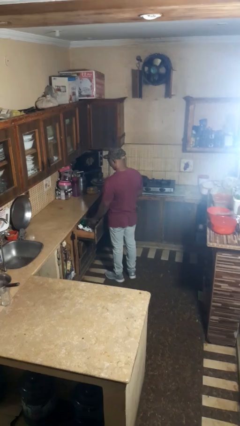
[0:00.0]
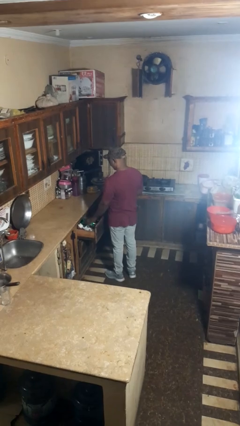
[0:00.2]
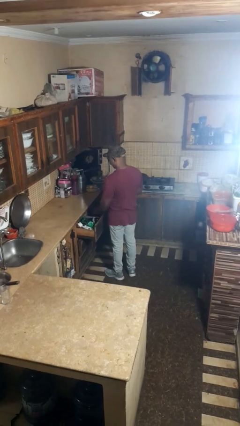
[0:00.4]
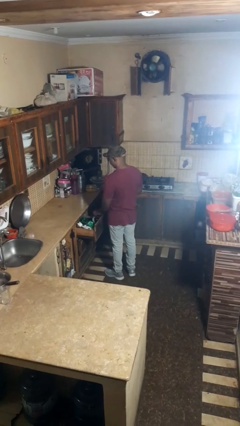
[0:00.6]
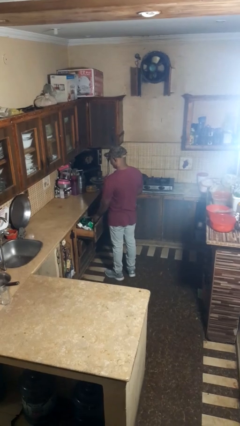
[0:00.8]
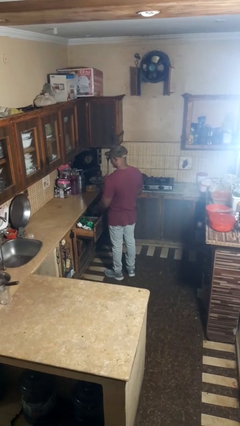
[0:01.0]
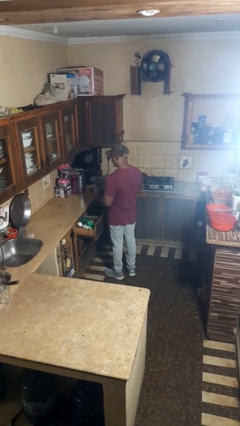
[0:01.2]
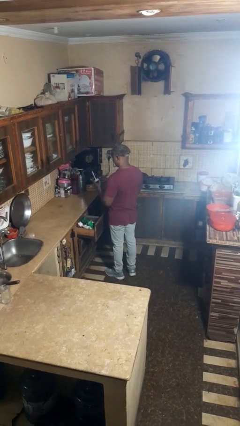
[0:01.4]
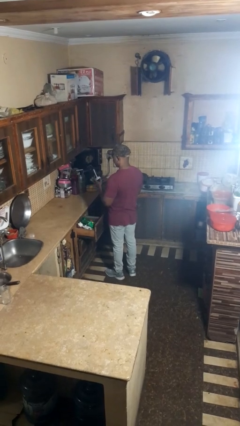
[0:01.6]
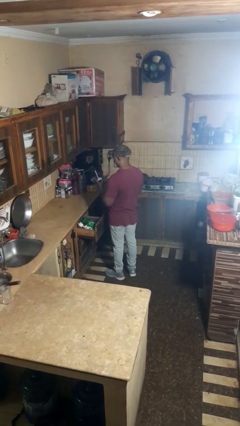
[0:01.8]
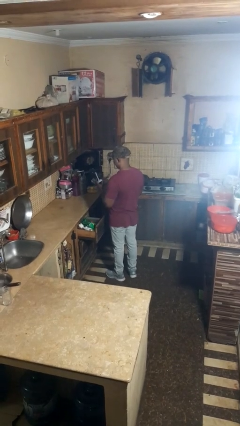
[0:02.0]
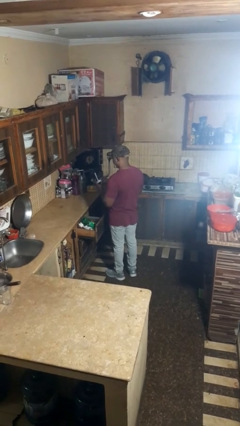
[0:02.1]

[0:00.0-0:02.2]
person takes object from kitchen drawer

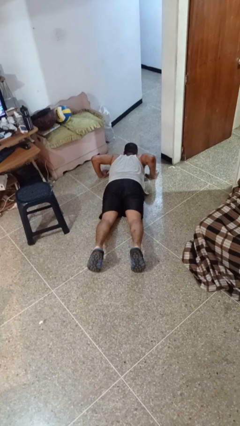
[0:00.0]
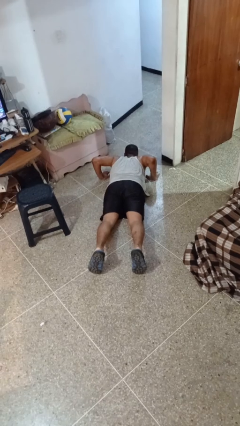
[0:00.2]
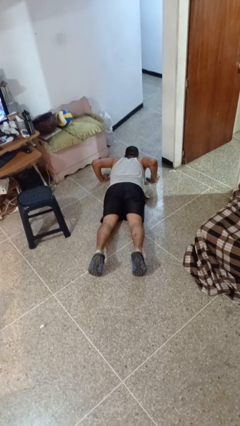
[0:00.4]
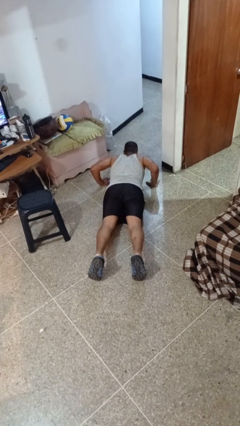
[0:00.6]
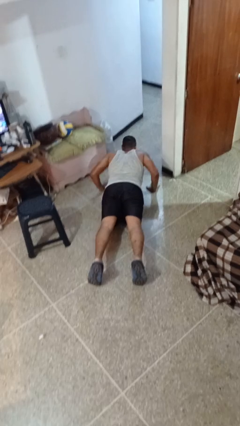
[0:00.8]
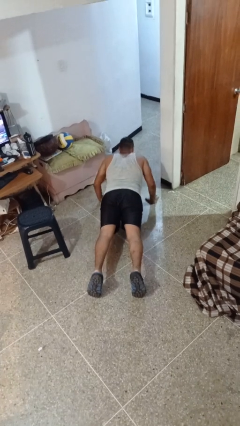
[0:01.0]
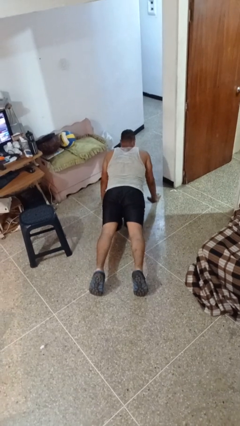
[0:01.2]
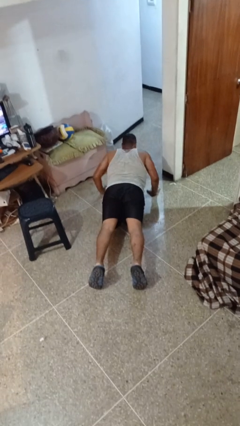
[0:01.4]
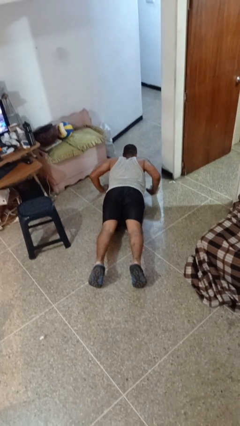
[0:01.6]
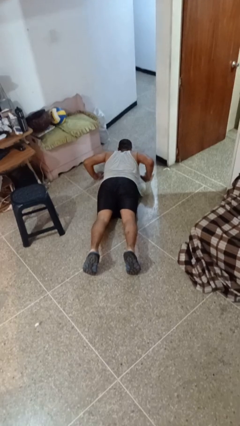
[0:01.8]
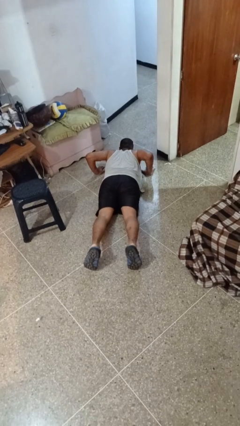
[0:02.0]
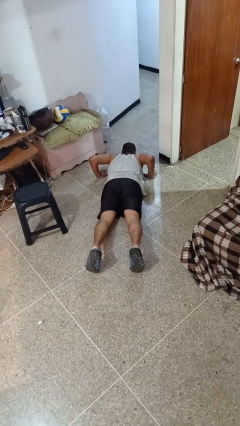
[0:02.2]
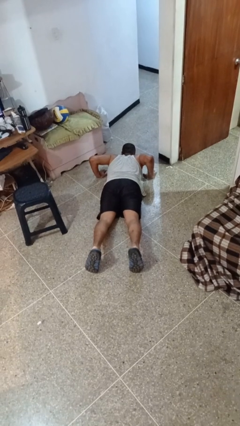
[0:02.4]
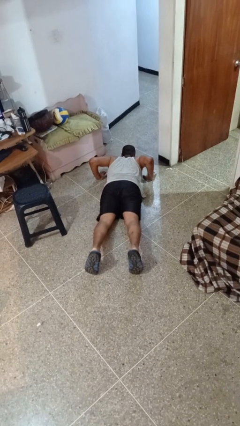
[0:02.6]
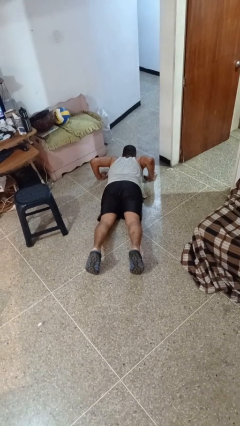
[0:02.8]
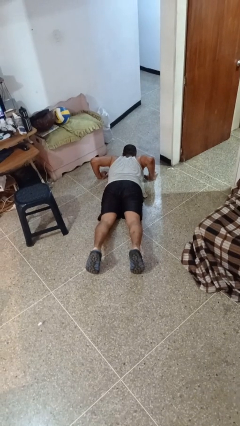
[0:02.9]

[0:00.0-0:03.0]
person exercises with pushup

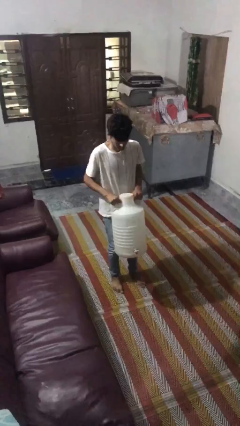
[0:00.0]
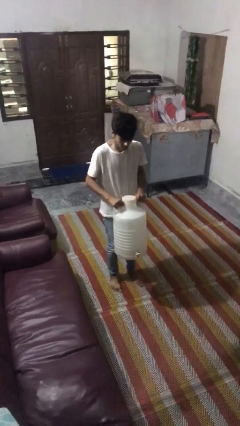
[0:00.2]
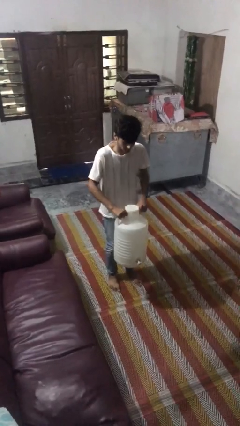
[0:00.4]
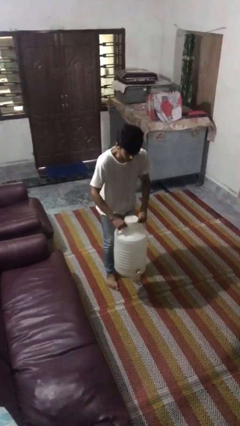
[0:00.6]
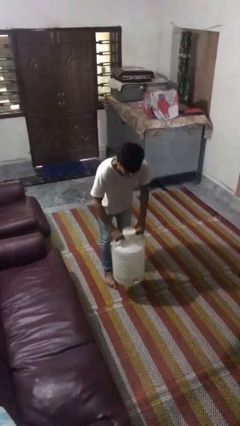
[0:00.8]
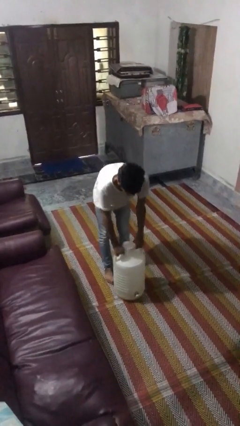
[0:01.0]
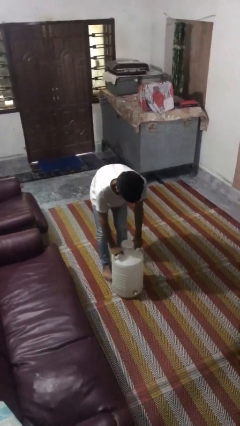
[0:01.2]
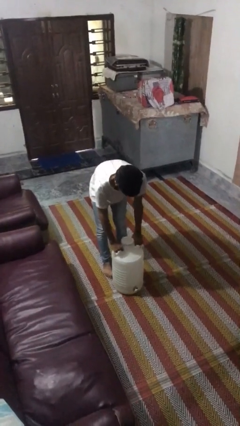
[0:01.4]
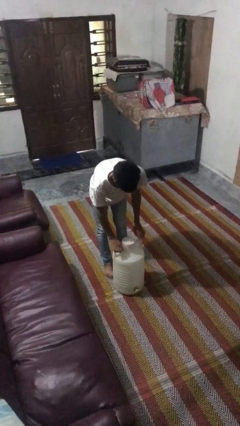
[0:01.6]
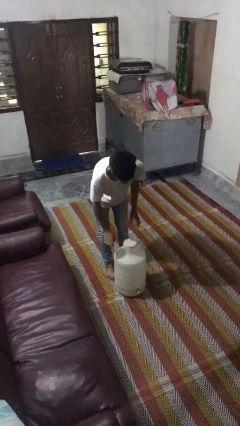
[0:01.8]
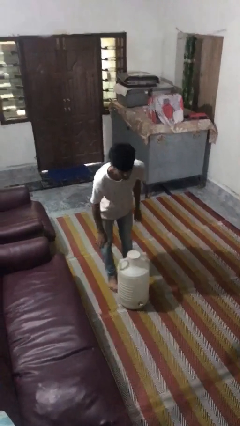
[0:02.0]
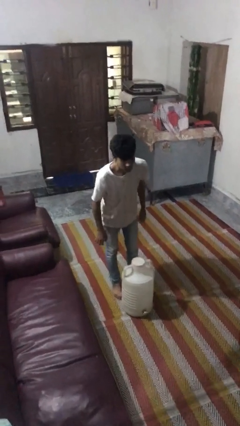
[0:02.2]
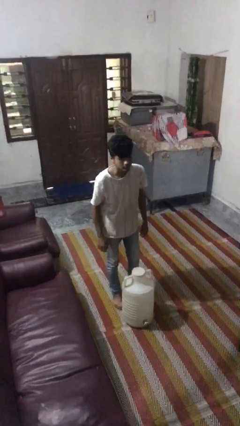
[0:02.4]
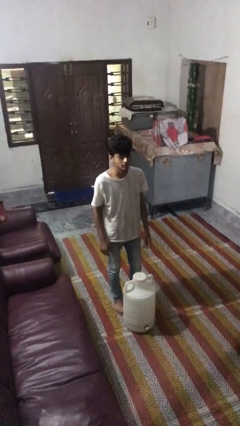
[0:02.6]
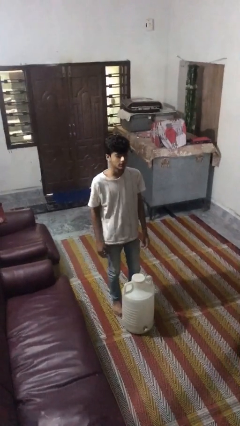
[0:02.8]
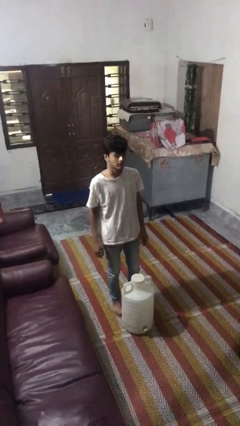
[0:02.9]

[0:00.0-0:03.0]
person puts down object on floor

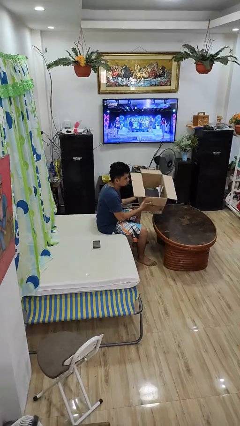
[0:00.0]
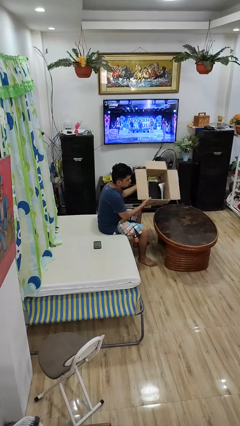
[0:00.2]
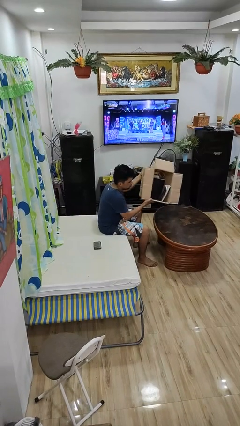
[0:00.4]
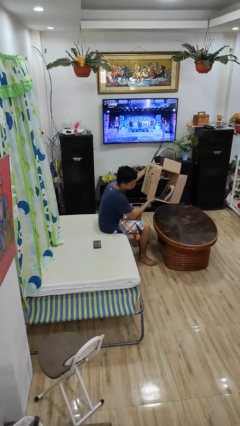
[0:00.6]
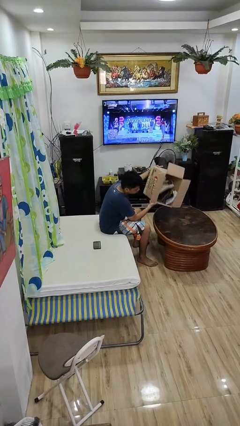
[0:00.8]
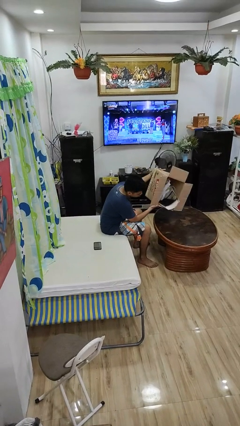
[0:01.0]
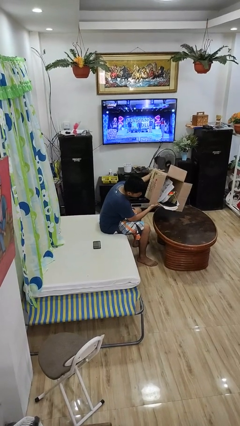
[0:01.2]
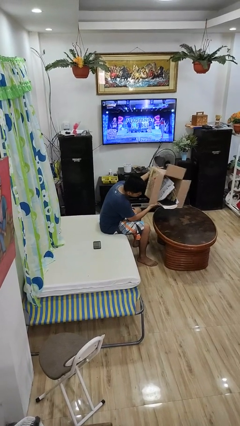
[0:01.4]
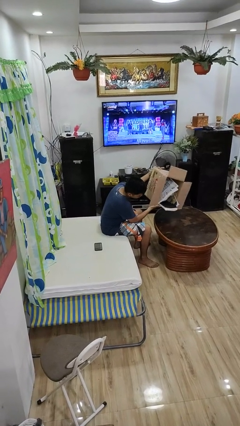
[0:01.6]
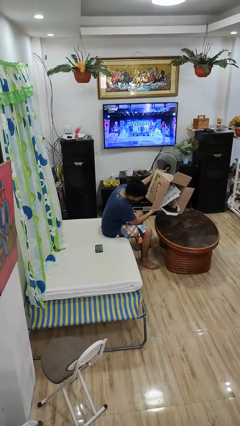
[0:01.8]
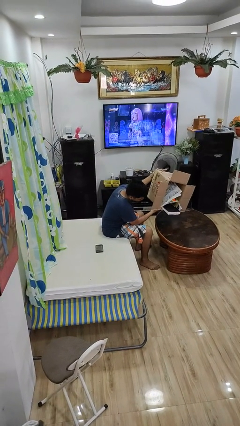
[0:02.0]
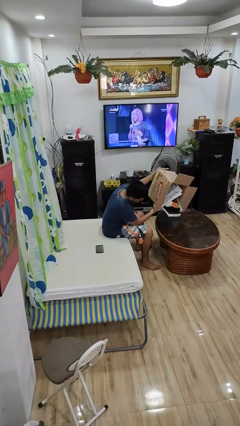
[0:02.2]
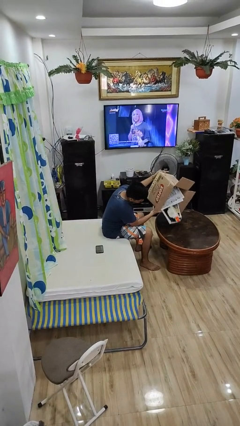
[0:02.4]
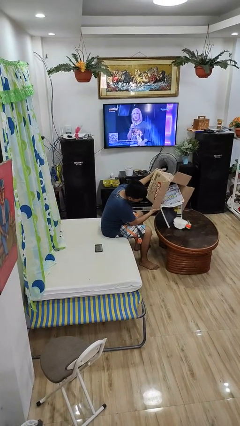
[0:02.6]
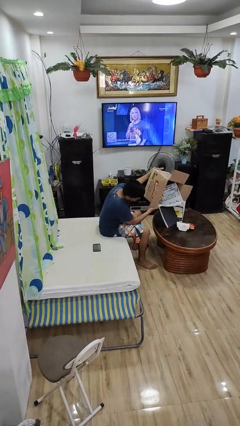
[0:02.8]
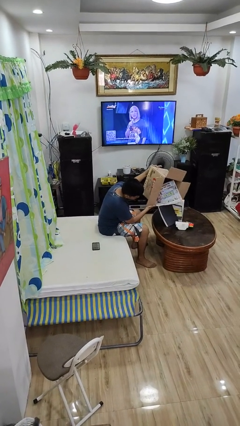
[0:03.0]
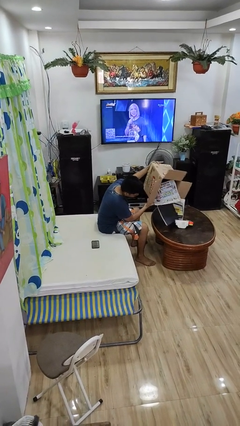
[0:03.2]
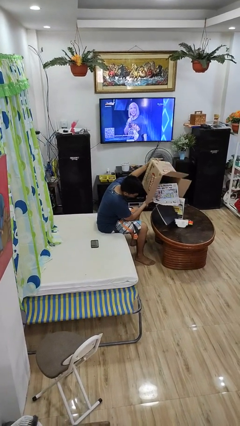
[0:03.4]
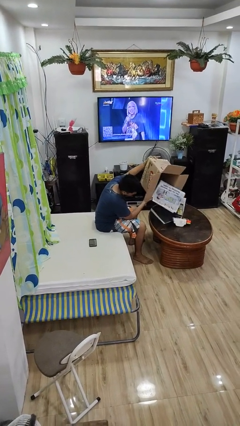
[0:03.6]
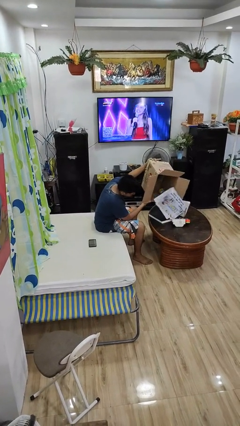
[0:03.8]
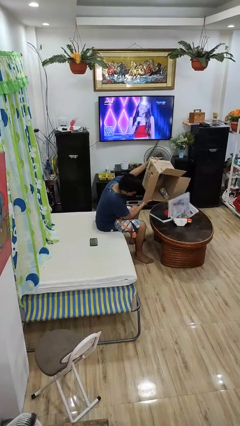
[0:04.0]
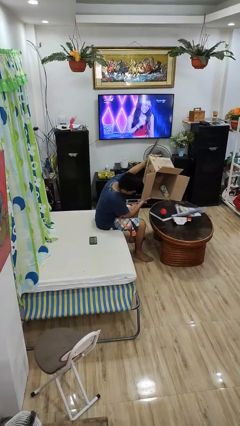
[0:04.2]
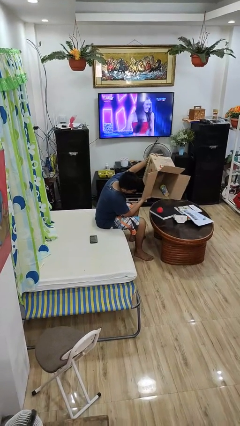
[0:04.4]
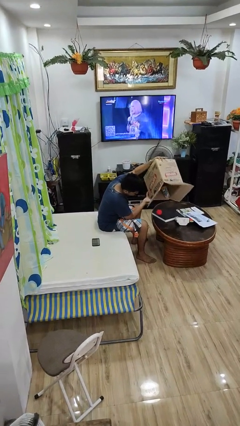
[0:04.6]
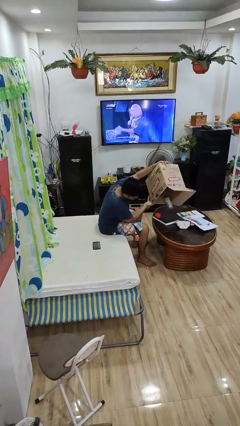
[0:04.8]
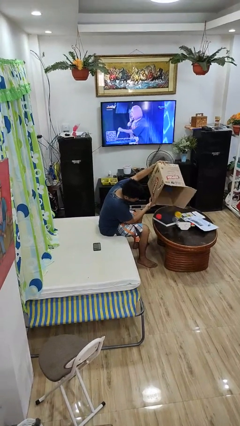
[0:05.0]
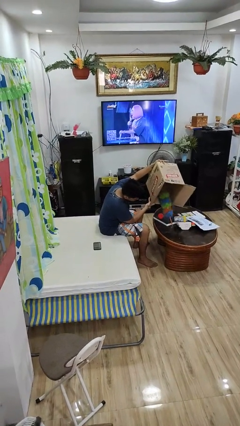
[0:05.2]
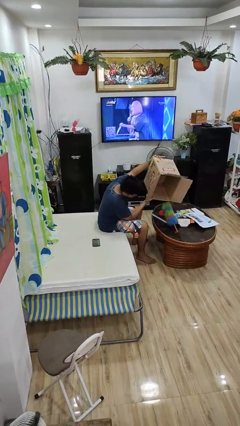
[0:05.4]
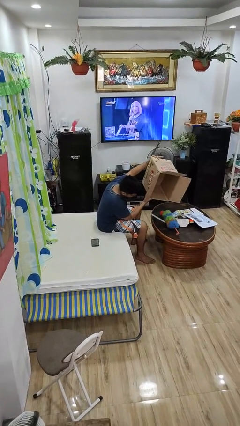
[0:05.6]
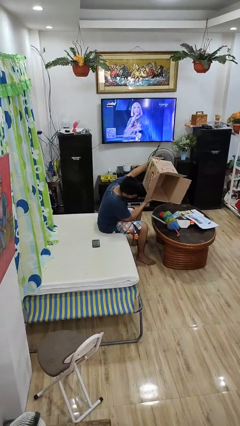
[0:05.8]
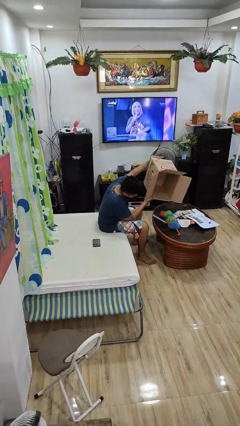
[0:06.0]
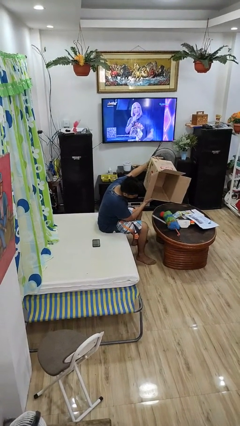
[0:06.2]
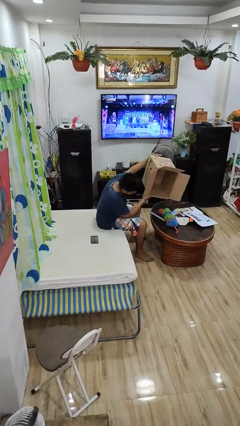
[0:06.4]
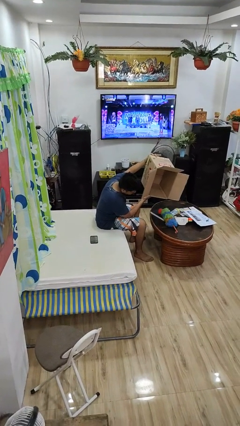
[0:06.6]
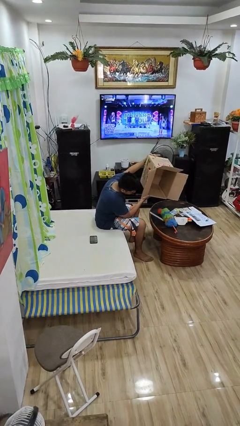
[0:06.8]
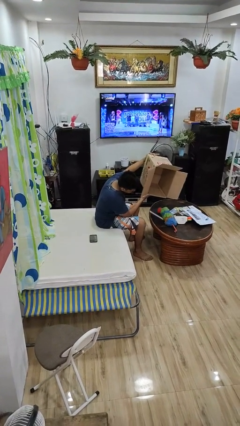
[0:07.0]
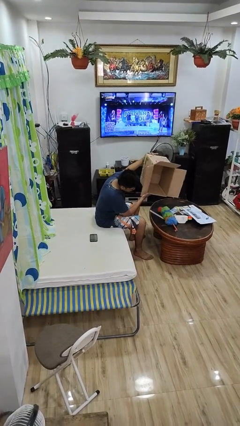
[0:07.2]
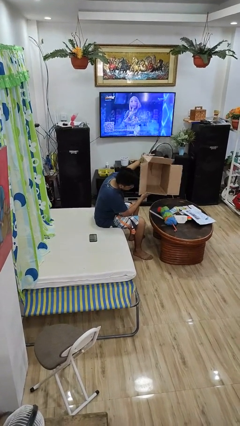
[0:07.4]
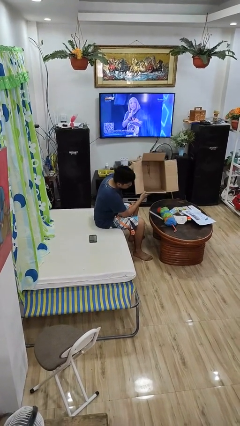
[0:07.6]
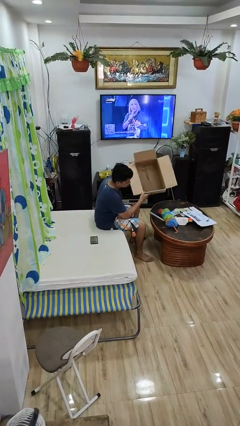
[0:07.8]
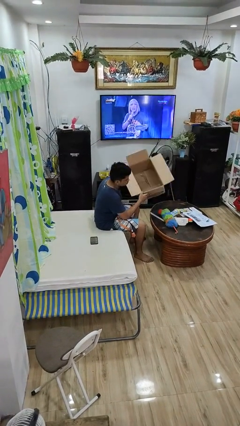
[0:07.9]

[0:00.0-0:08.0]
person unloads box onto table

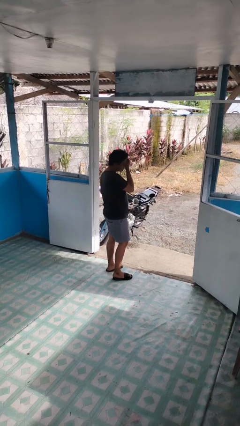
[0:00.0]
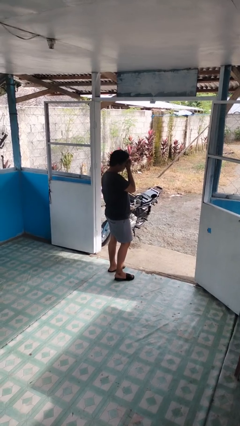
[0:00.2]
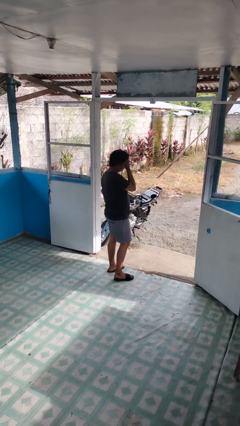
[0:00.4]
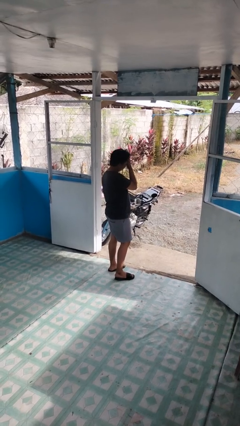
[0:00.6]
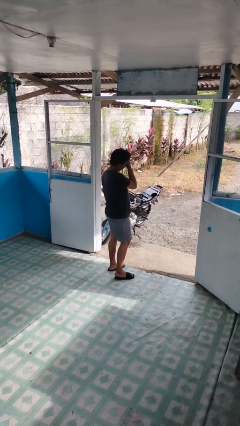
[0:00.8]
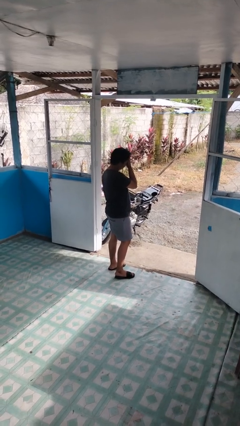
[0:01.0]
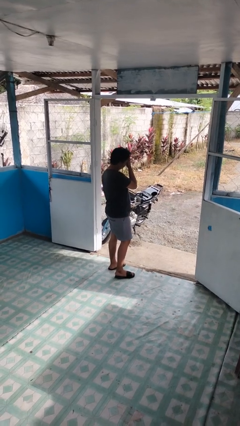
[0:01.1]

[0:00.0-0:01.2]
person scratches face

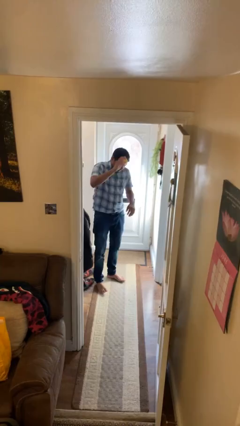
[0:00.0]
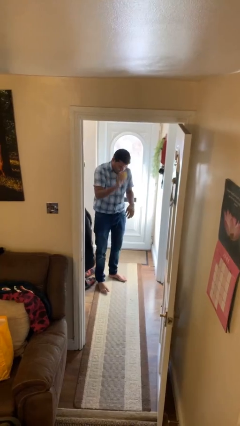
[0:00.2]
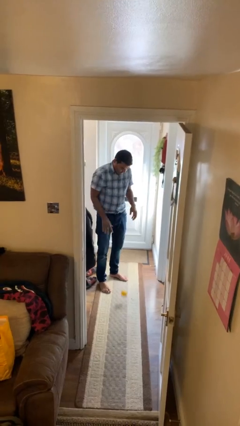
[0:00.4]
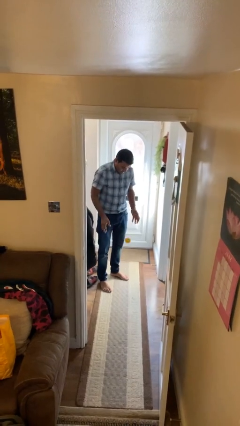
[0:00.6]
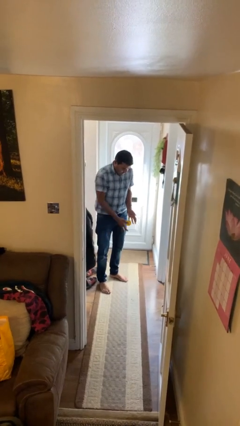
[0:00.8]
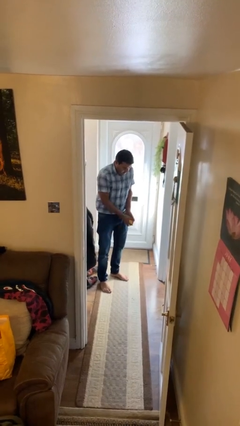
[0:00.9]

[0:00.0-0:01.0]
person bounces ball on floor
